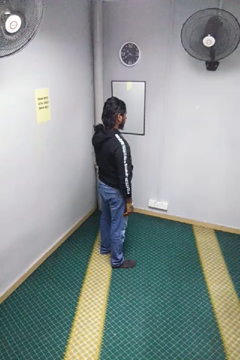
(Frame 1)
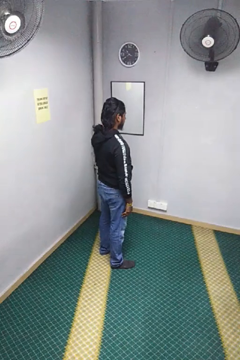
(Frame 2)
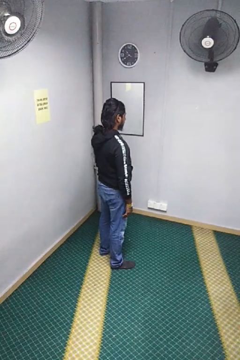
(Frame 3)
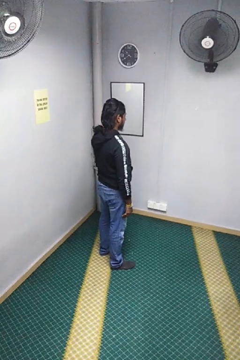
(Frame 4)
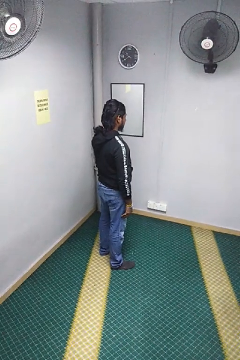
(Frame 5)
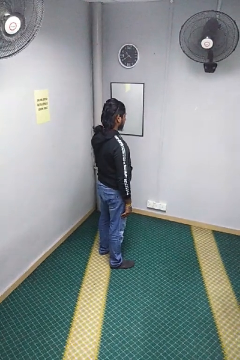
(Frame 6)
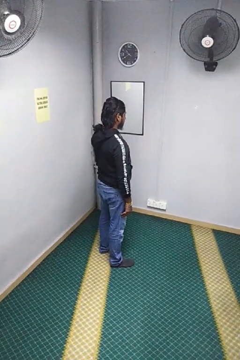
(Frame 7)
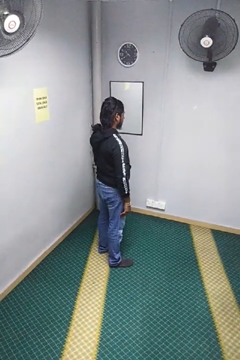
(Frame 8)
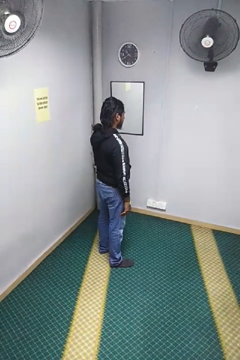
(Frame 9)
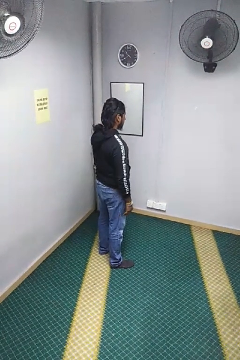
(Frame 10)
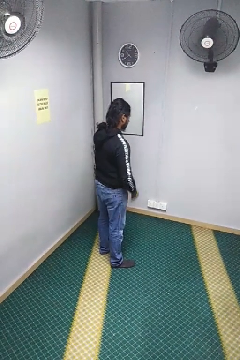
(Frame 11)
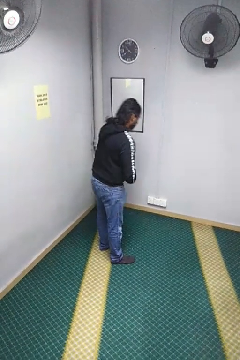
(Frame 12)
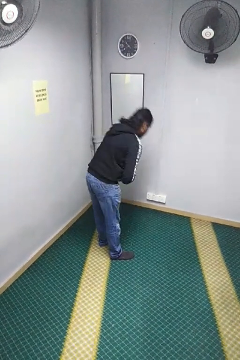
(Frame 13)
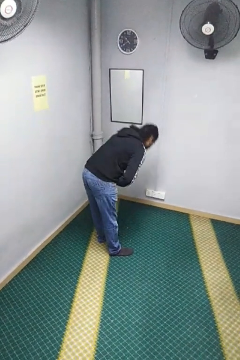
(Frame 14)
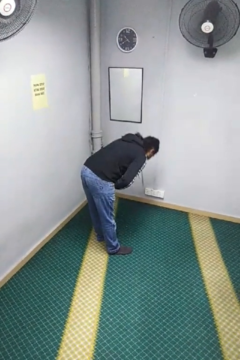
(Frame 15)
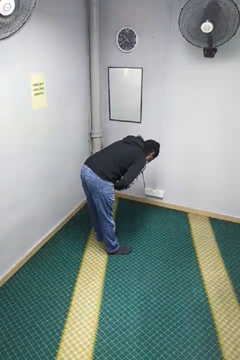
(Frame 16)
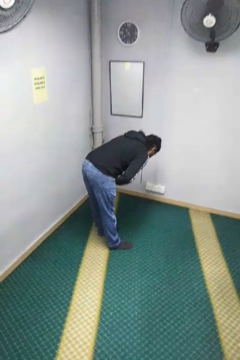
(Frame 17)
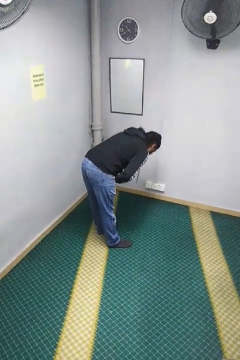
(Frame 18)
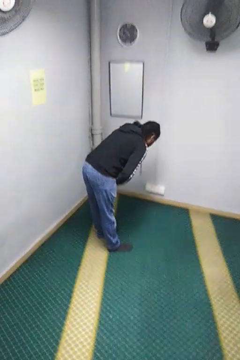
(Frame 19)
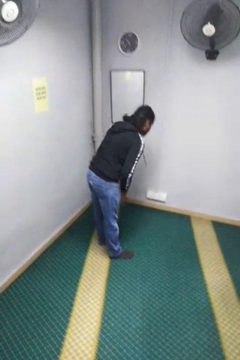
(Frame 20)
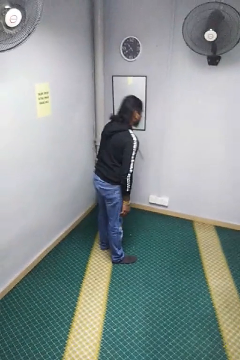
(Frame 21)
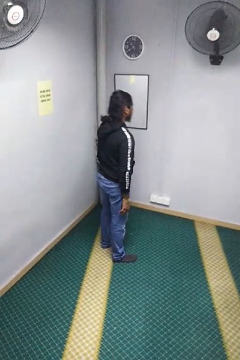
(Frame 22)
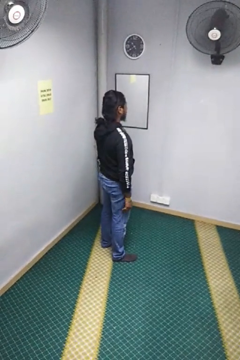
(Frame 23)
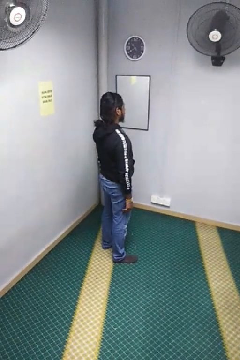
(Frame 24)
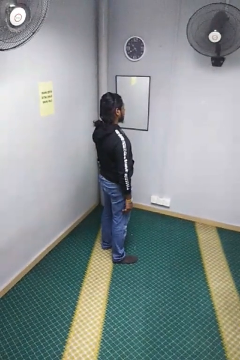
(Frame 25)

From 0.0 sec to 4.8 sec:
person bows

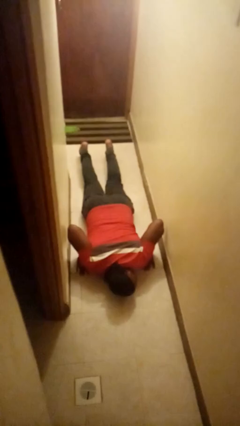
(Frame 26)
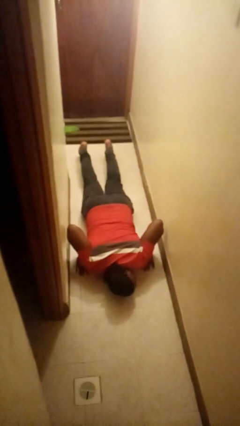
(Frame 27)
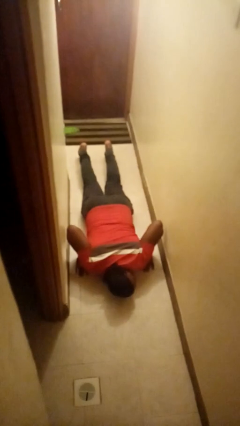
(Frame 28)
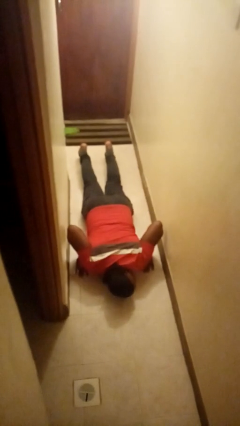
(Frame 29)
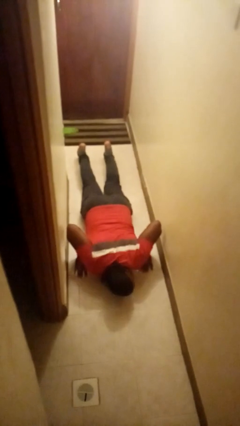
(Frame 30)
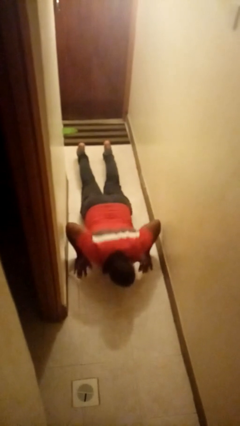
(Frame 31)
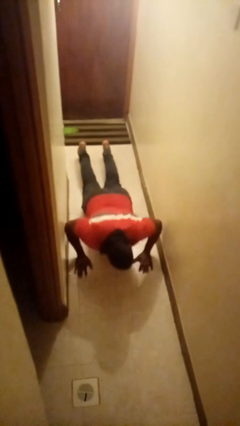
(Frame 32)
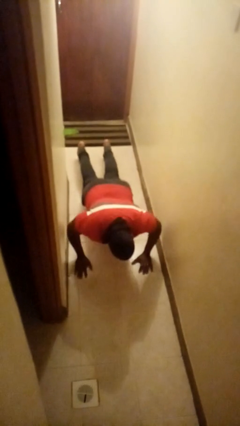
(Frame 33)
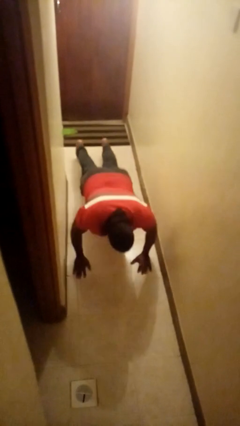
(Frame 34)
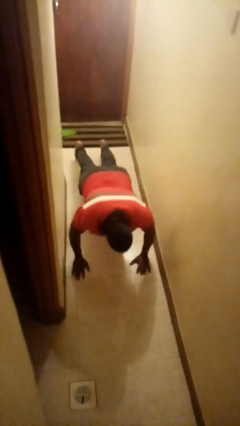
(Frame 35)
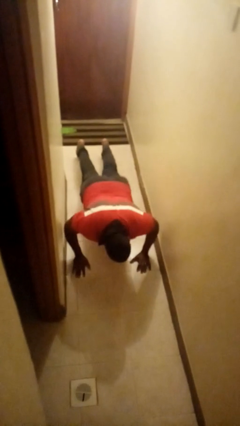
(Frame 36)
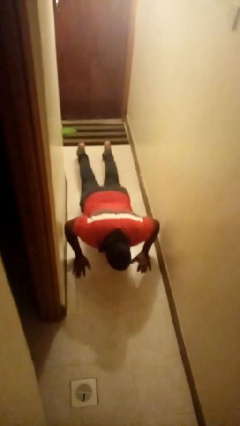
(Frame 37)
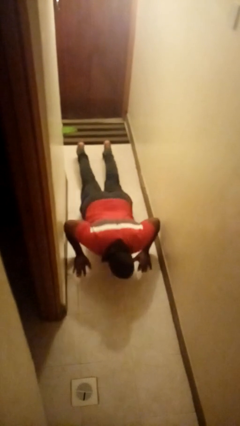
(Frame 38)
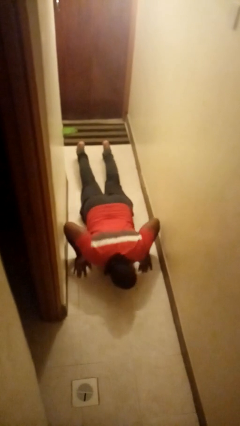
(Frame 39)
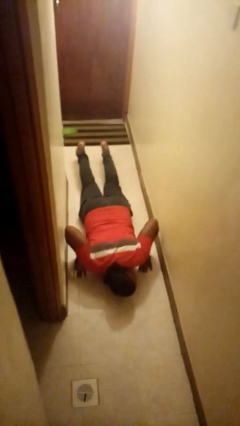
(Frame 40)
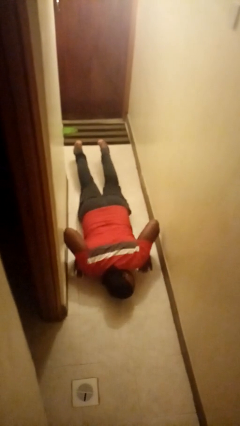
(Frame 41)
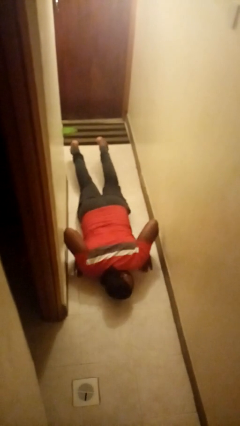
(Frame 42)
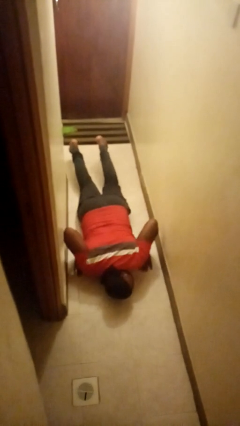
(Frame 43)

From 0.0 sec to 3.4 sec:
person exercises with pushup

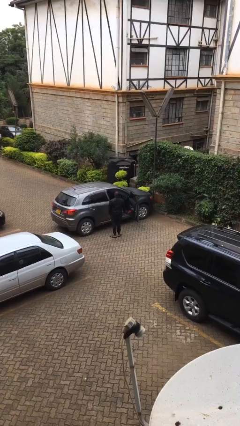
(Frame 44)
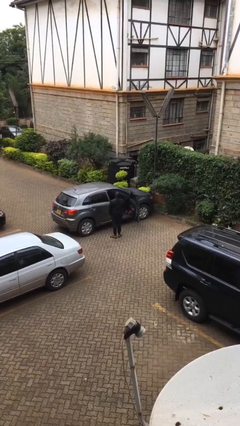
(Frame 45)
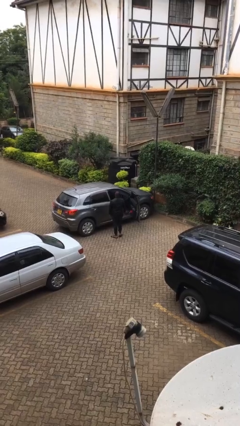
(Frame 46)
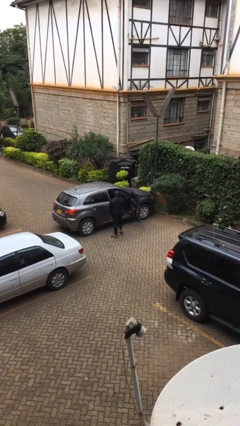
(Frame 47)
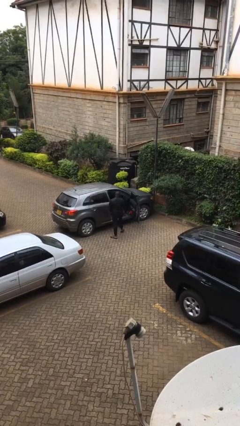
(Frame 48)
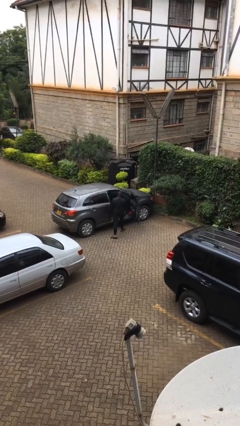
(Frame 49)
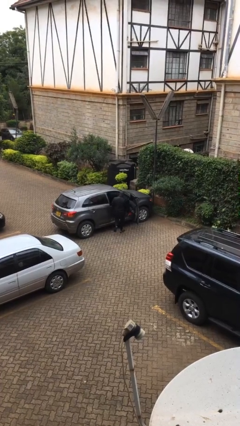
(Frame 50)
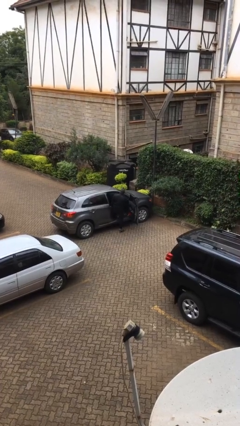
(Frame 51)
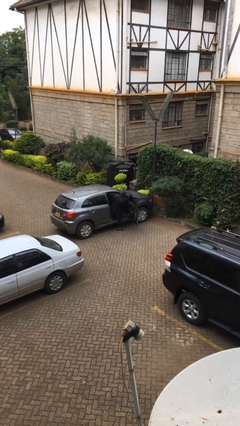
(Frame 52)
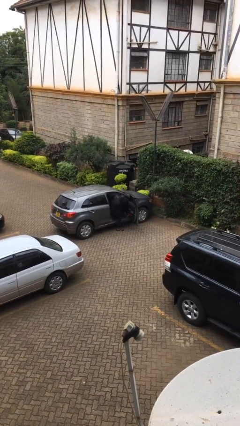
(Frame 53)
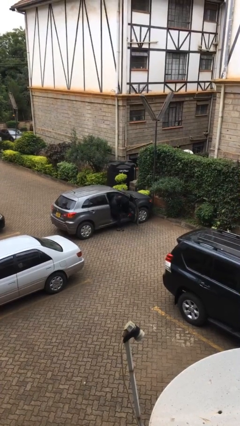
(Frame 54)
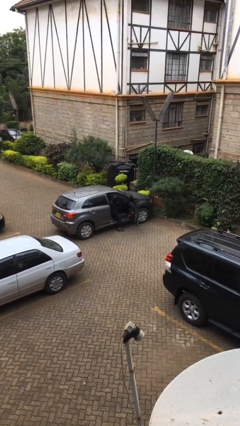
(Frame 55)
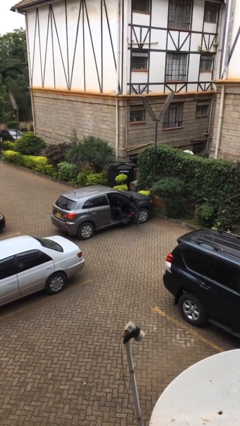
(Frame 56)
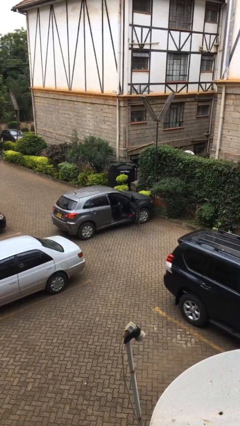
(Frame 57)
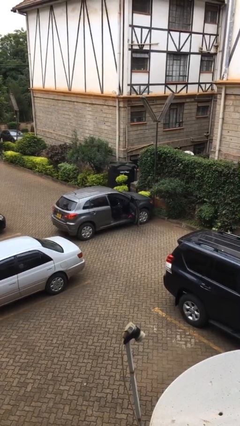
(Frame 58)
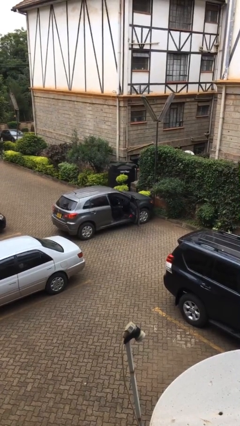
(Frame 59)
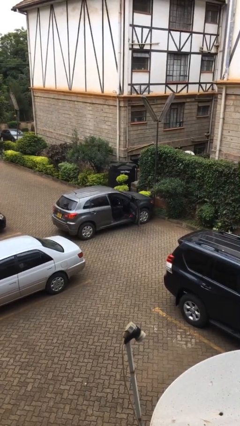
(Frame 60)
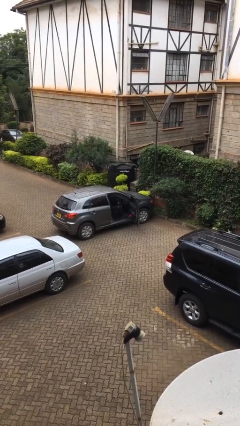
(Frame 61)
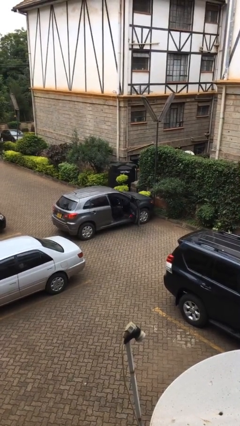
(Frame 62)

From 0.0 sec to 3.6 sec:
person enters car

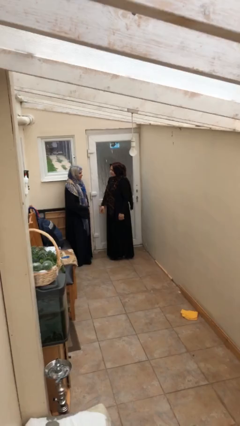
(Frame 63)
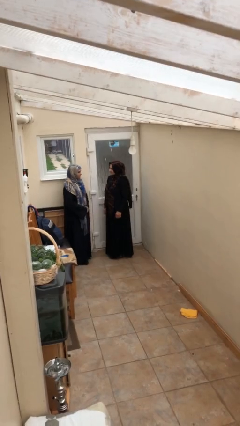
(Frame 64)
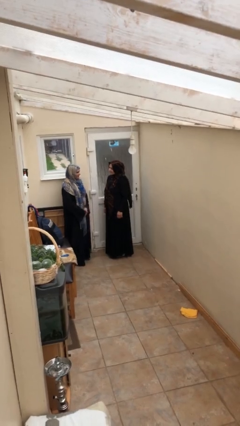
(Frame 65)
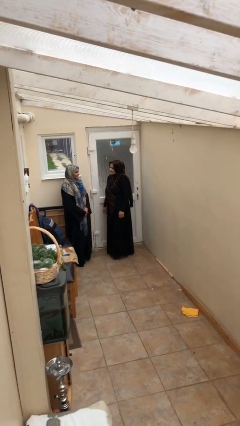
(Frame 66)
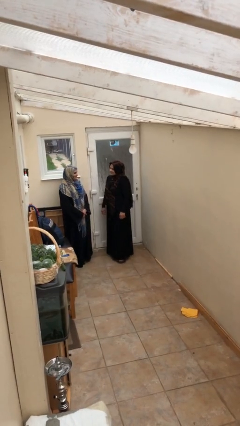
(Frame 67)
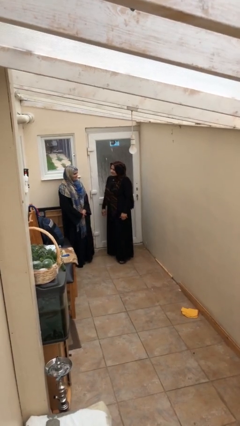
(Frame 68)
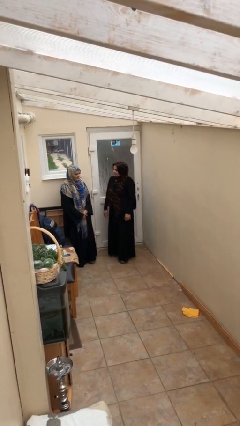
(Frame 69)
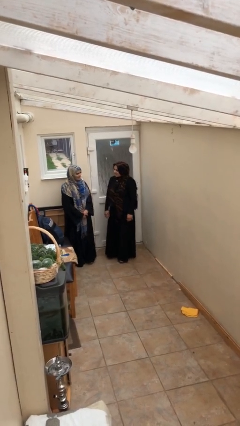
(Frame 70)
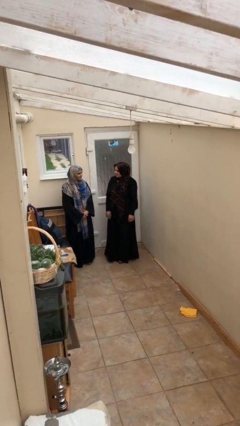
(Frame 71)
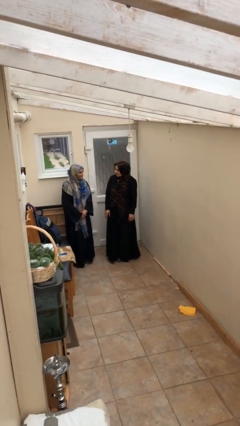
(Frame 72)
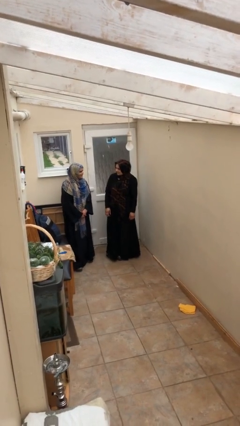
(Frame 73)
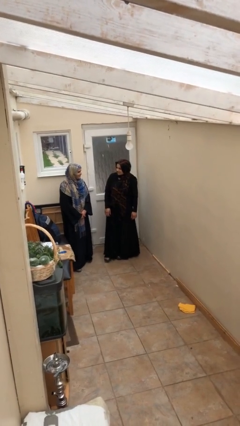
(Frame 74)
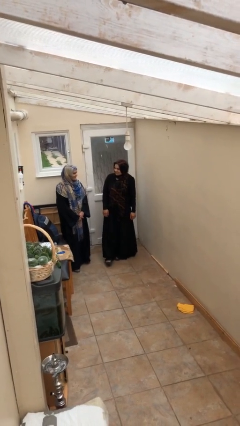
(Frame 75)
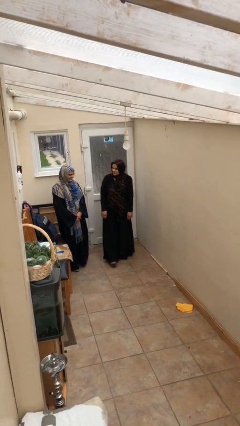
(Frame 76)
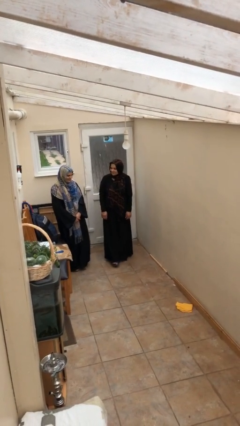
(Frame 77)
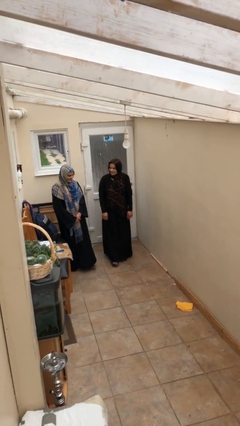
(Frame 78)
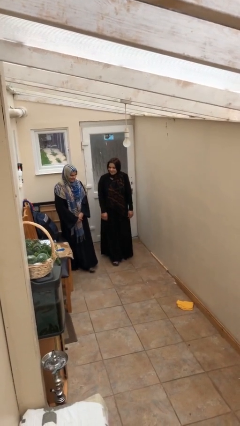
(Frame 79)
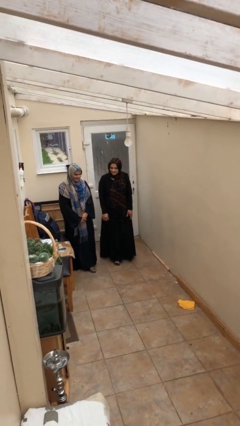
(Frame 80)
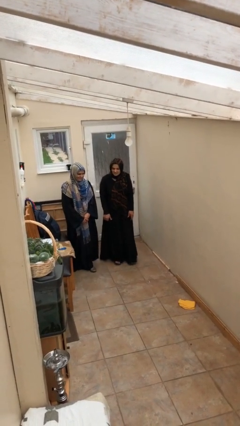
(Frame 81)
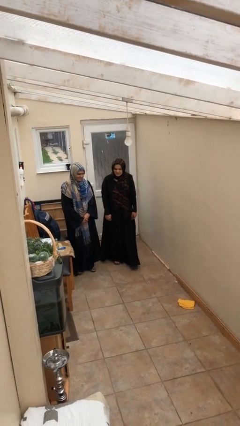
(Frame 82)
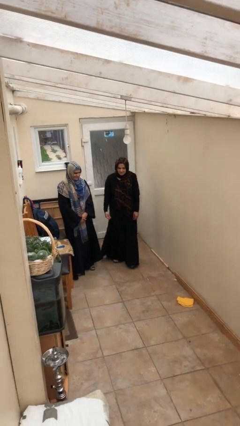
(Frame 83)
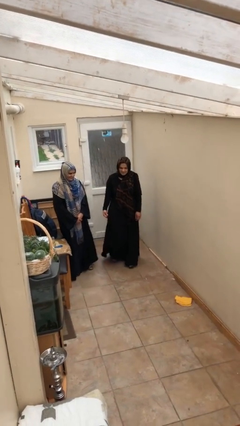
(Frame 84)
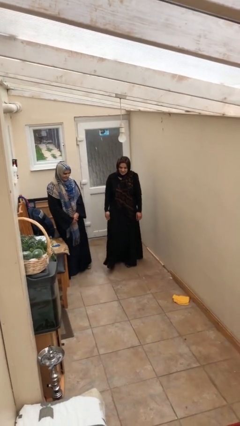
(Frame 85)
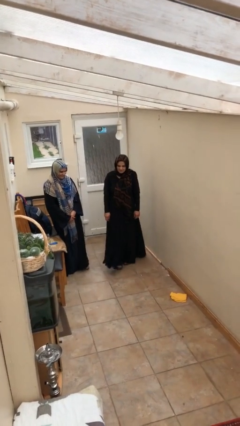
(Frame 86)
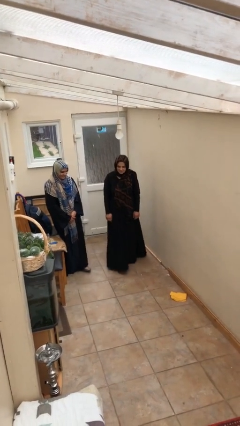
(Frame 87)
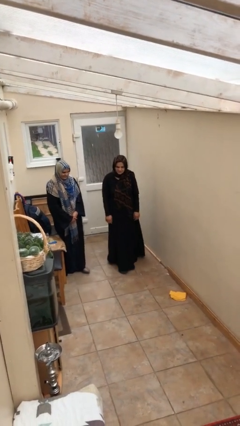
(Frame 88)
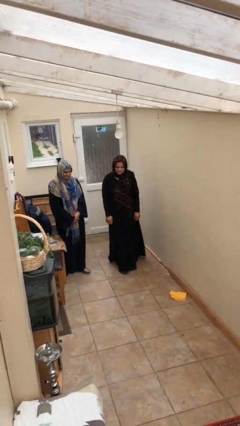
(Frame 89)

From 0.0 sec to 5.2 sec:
person talks to person

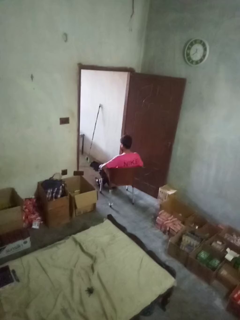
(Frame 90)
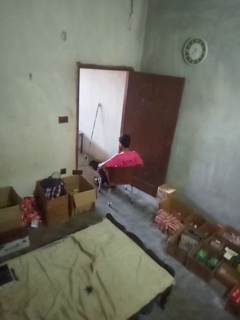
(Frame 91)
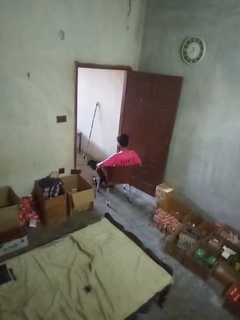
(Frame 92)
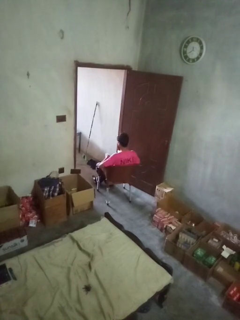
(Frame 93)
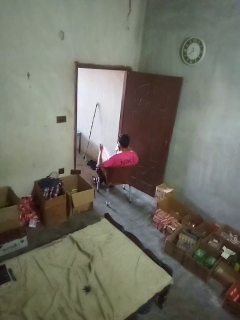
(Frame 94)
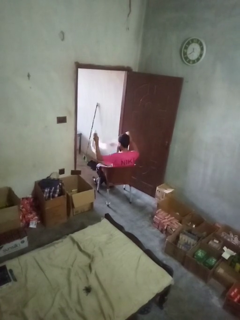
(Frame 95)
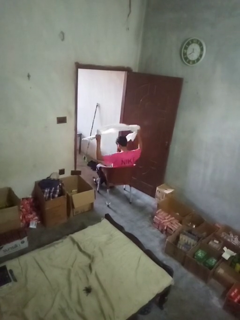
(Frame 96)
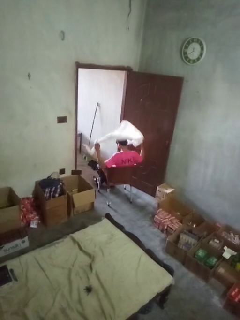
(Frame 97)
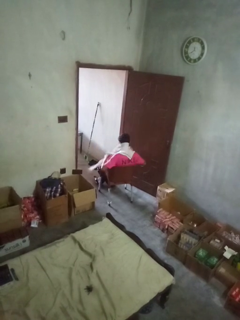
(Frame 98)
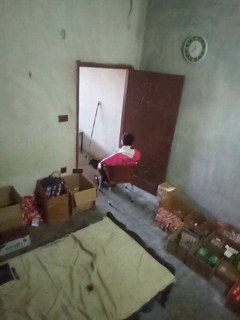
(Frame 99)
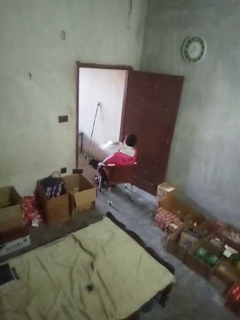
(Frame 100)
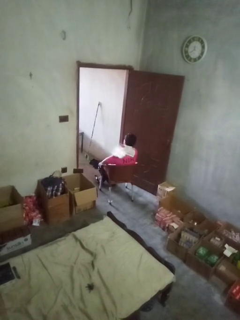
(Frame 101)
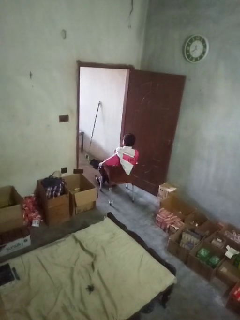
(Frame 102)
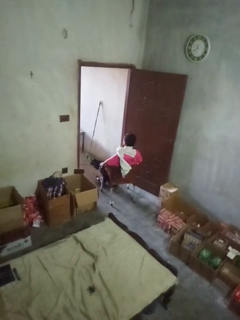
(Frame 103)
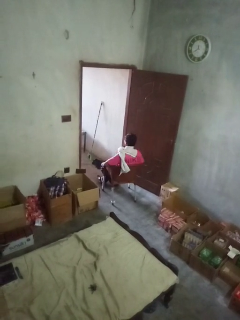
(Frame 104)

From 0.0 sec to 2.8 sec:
person puts on scarf
